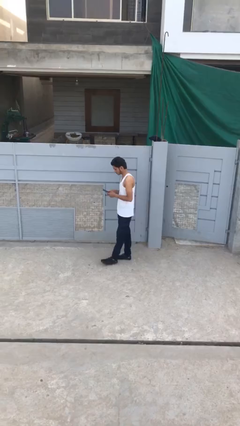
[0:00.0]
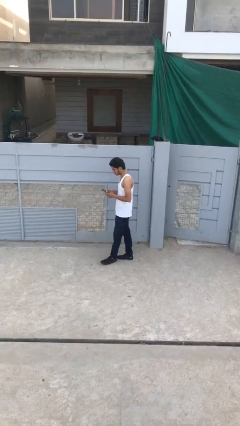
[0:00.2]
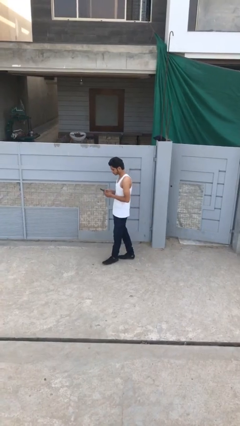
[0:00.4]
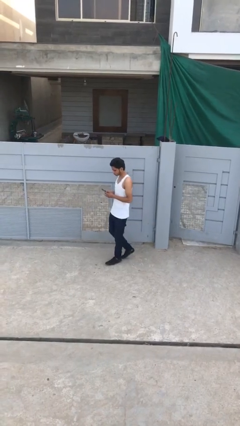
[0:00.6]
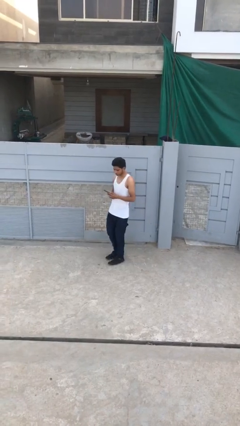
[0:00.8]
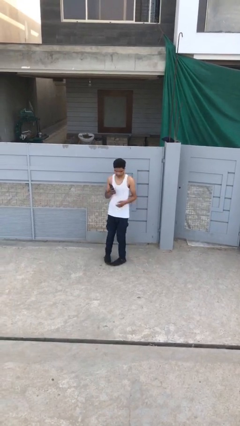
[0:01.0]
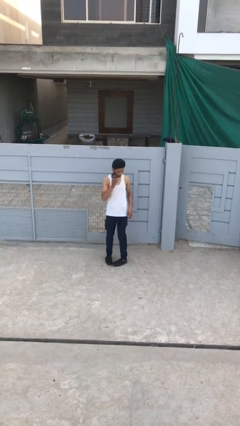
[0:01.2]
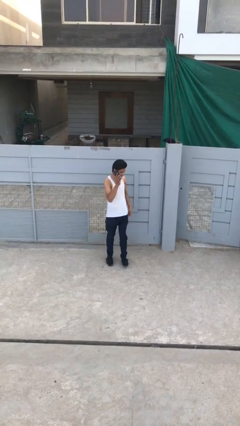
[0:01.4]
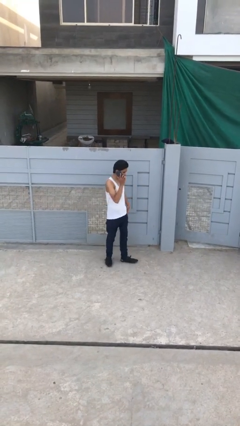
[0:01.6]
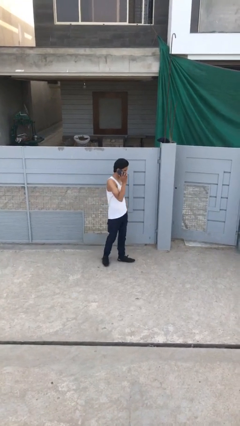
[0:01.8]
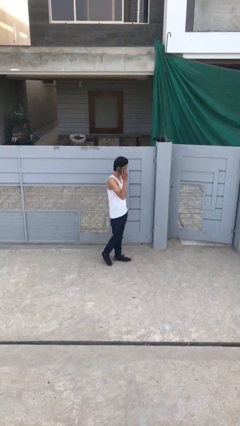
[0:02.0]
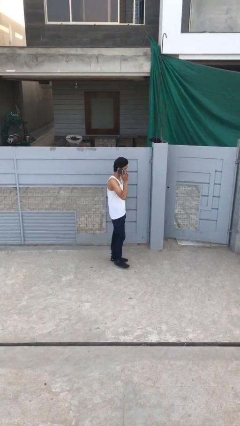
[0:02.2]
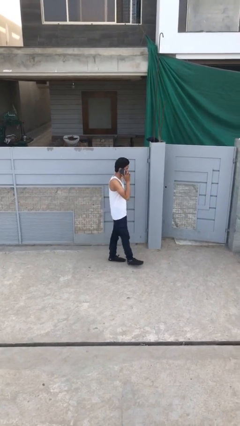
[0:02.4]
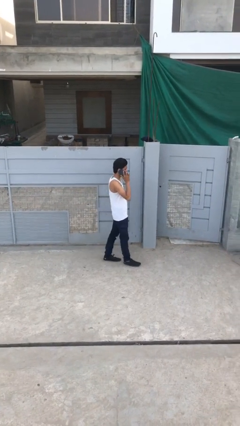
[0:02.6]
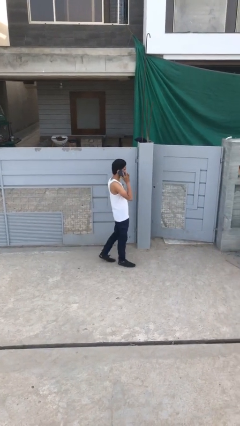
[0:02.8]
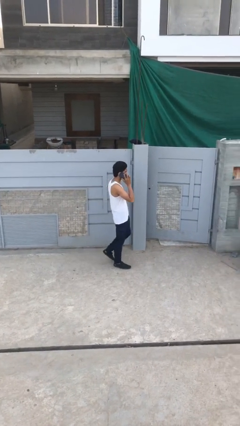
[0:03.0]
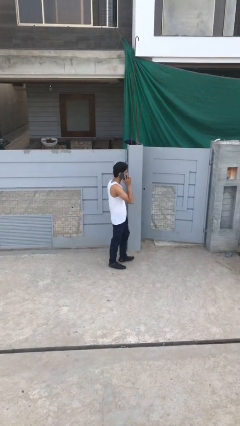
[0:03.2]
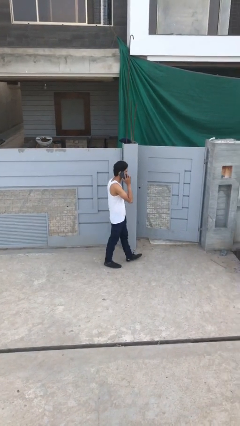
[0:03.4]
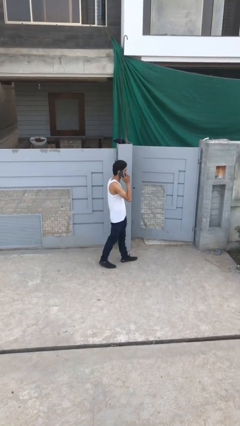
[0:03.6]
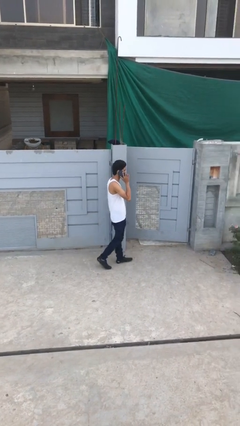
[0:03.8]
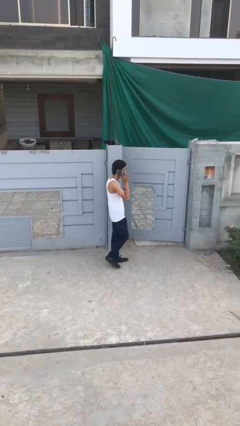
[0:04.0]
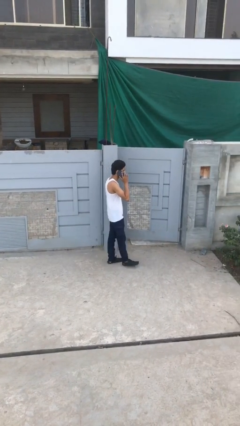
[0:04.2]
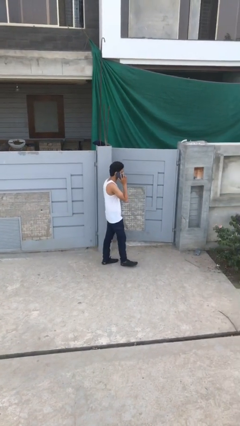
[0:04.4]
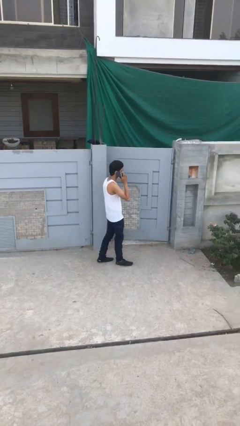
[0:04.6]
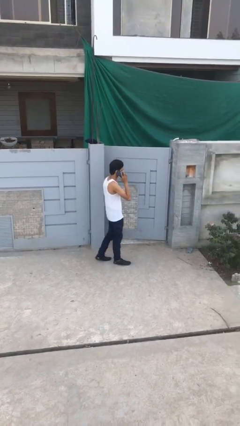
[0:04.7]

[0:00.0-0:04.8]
person talks on phone

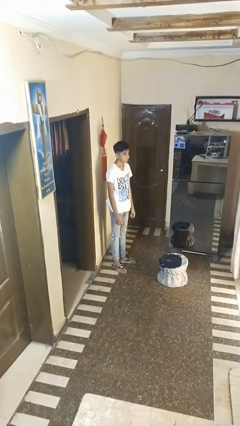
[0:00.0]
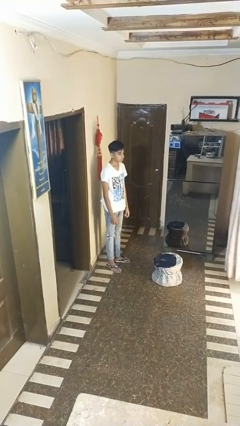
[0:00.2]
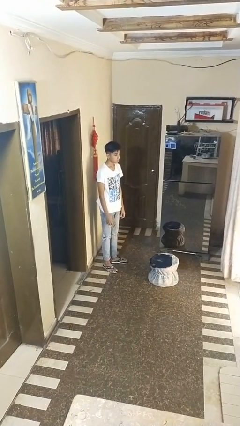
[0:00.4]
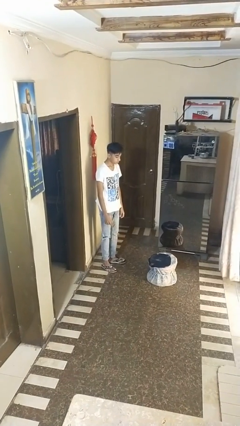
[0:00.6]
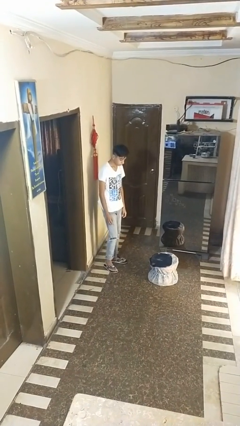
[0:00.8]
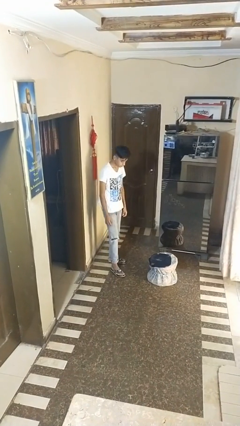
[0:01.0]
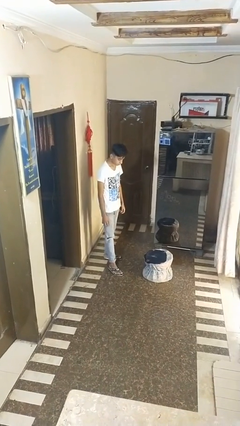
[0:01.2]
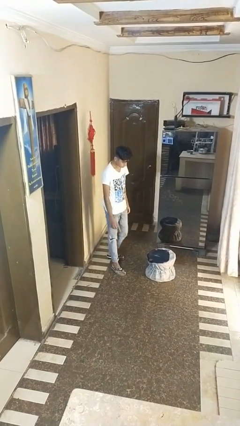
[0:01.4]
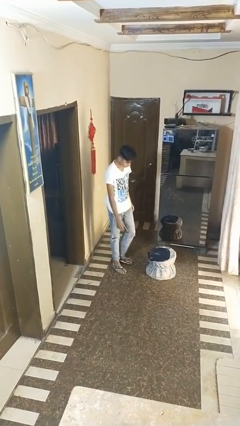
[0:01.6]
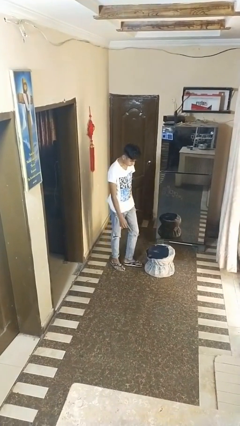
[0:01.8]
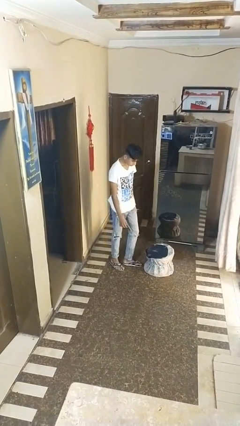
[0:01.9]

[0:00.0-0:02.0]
person trips on object on floor

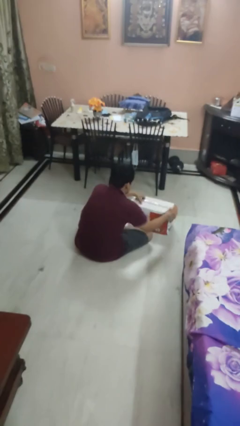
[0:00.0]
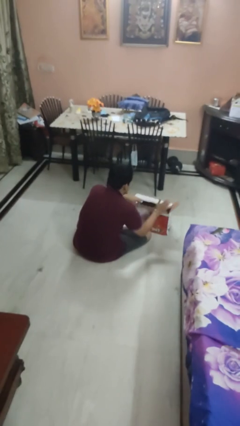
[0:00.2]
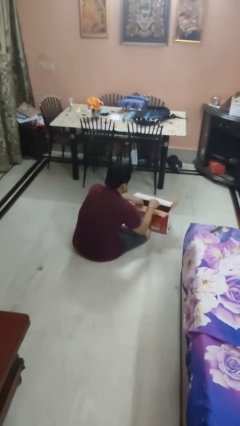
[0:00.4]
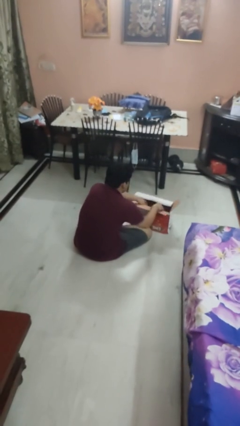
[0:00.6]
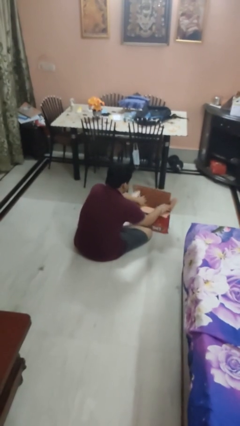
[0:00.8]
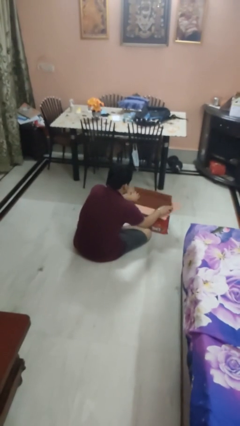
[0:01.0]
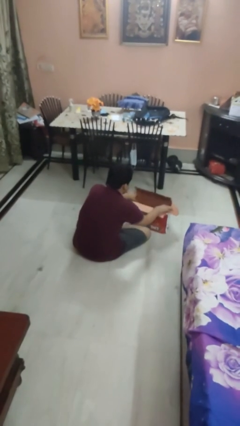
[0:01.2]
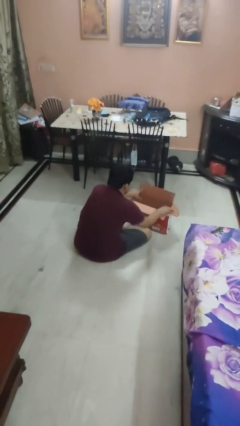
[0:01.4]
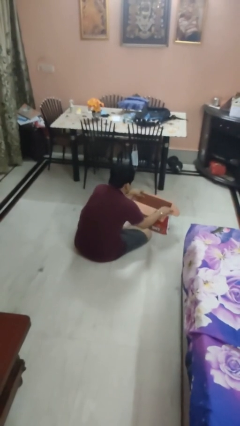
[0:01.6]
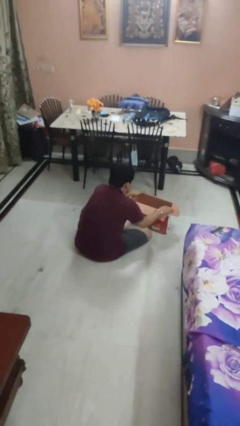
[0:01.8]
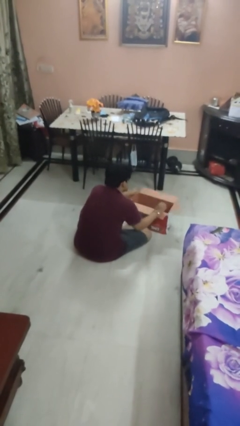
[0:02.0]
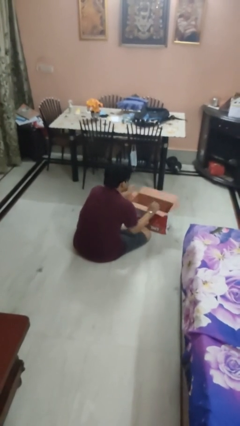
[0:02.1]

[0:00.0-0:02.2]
person opens box

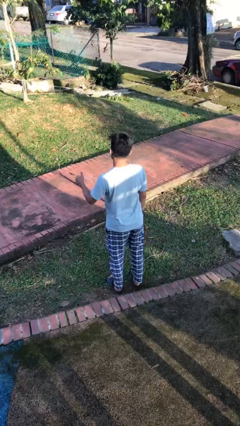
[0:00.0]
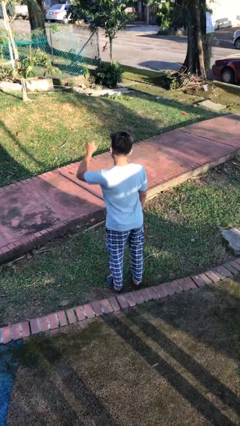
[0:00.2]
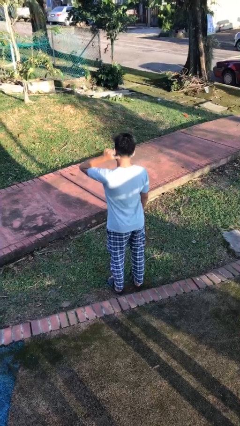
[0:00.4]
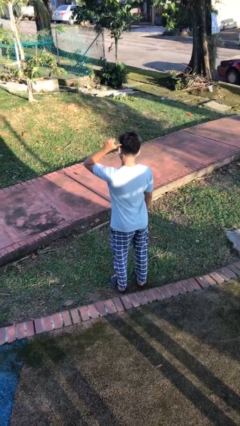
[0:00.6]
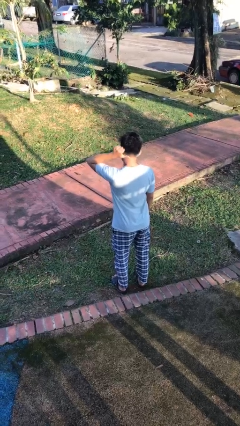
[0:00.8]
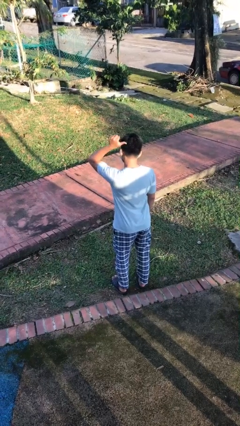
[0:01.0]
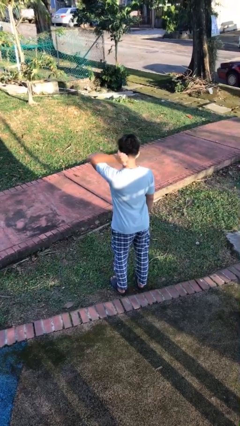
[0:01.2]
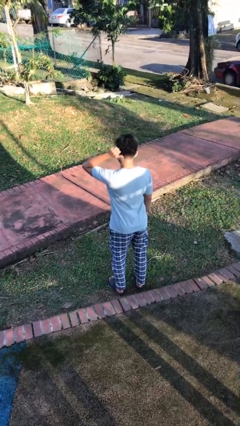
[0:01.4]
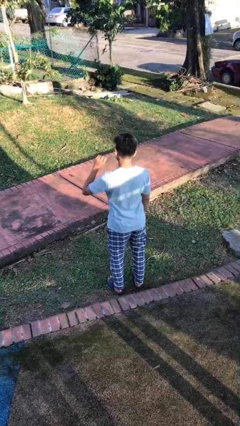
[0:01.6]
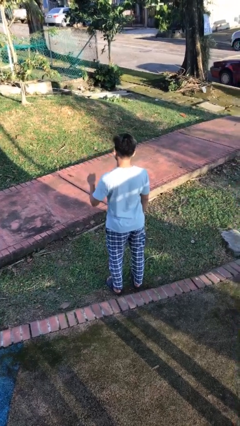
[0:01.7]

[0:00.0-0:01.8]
person gestures behind me

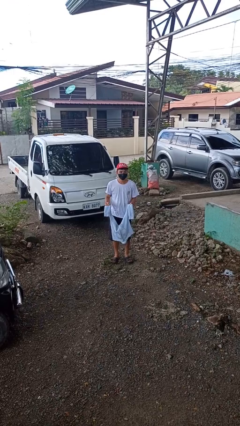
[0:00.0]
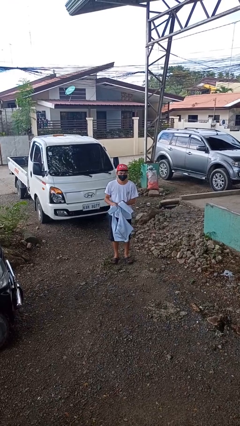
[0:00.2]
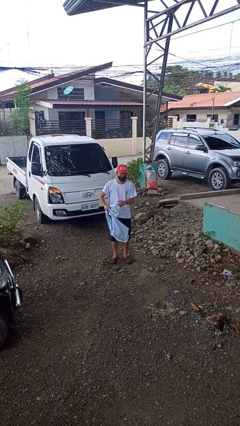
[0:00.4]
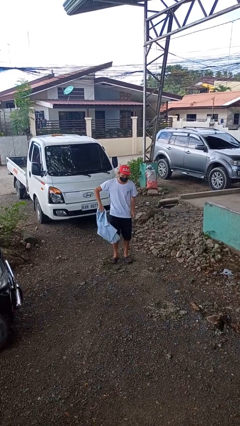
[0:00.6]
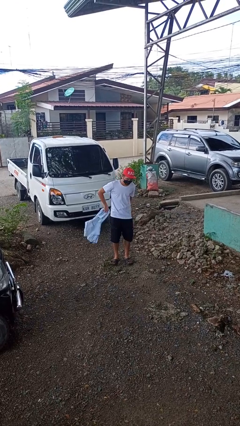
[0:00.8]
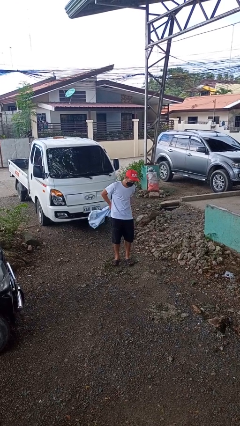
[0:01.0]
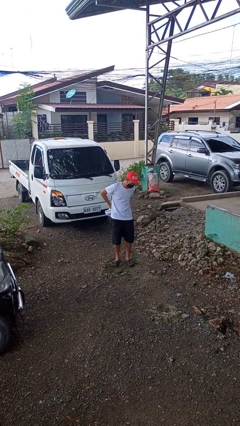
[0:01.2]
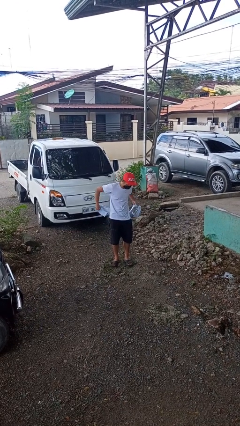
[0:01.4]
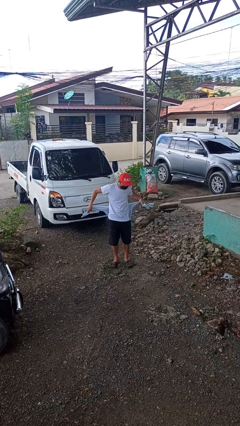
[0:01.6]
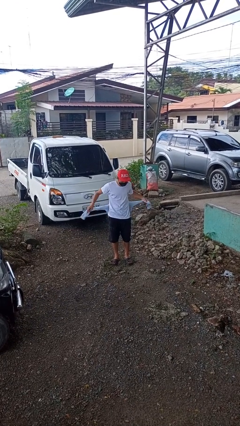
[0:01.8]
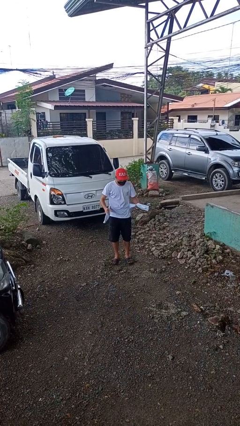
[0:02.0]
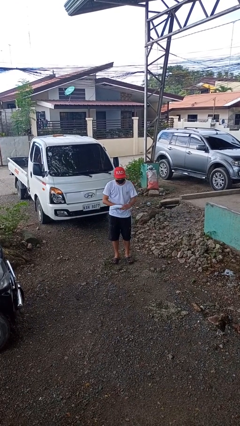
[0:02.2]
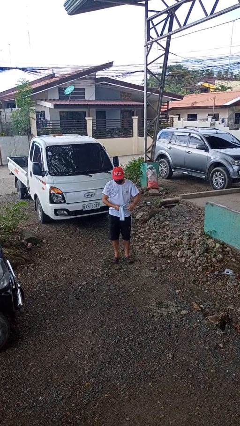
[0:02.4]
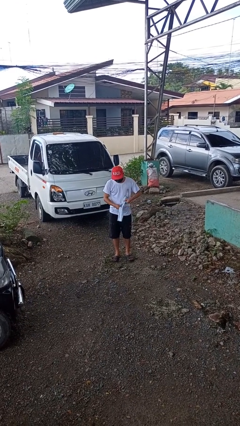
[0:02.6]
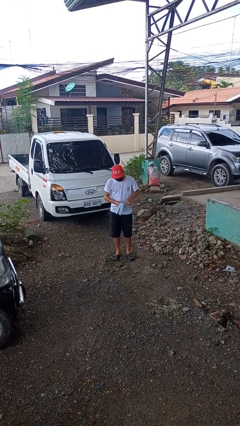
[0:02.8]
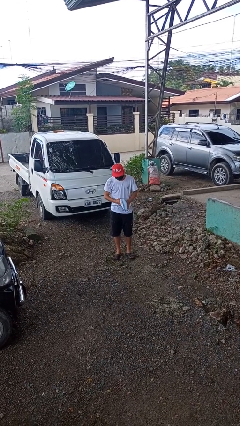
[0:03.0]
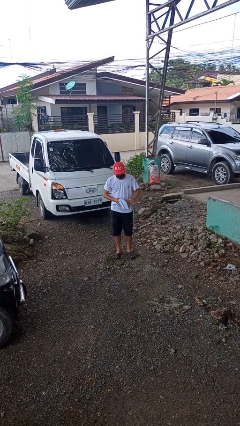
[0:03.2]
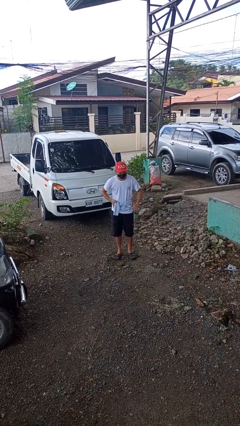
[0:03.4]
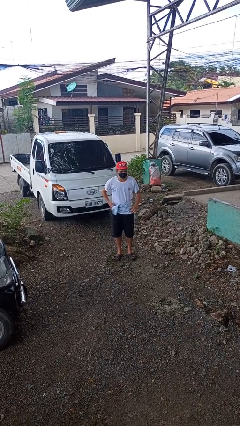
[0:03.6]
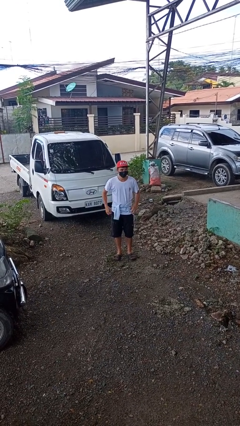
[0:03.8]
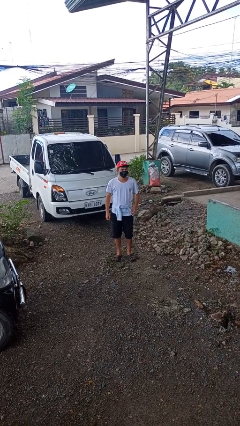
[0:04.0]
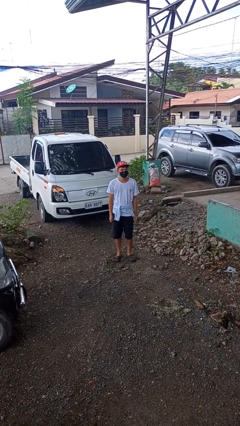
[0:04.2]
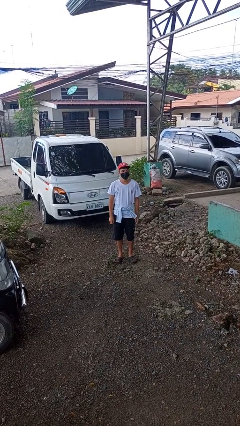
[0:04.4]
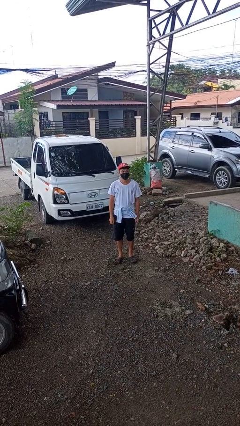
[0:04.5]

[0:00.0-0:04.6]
person ties jacket around waist

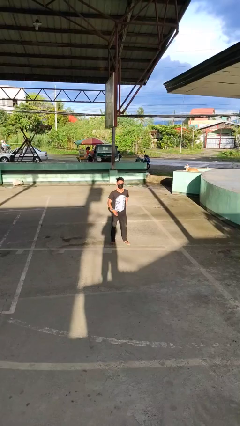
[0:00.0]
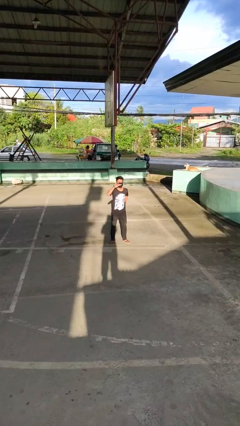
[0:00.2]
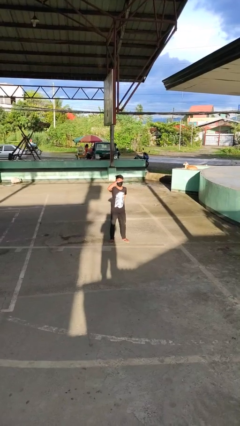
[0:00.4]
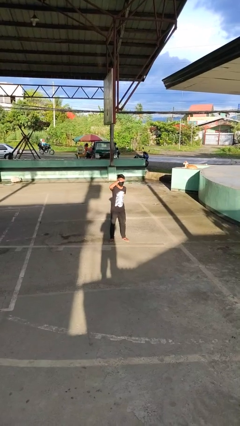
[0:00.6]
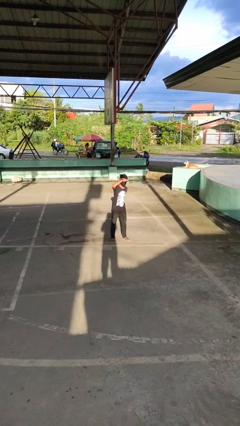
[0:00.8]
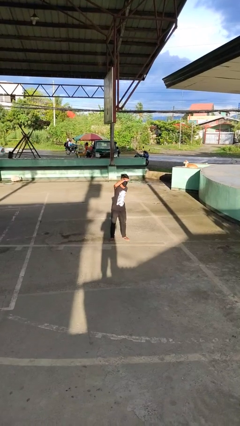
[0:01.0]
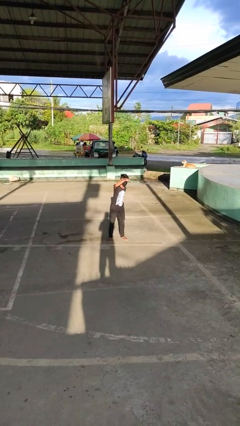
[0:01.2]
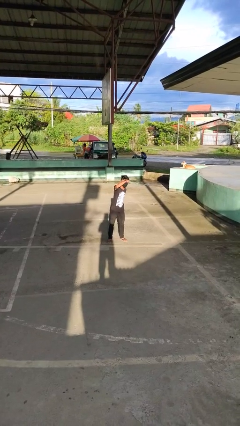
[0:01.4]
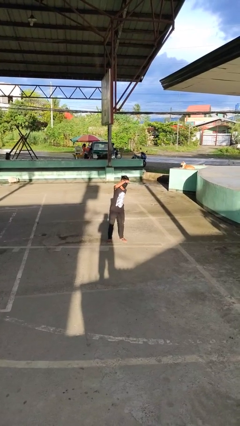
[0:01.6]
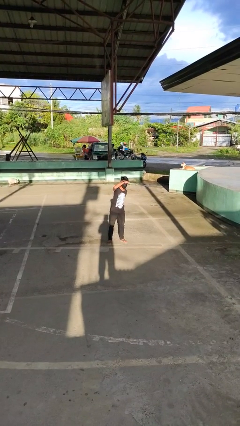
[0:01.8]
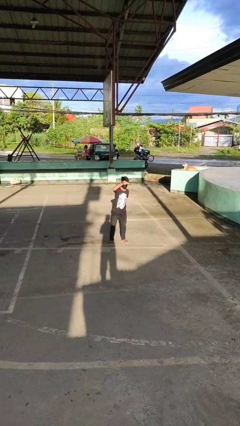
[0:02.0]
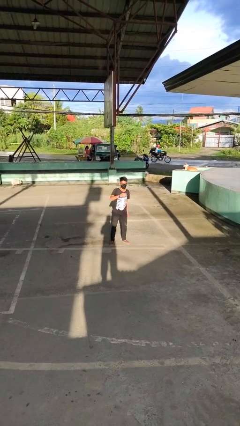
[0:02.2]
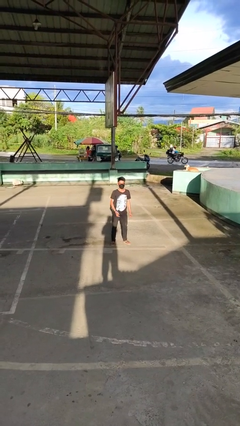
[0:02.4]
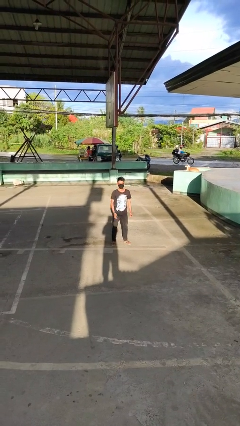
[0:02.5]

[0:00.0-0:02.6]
person shades eyes
